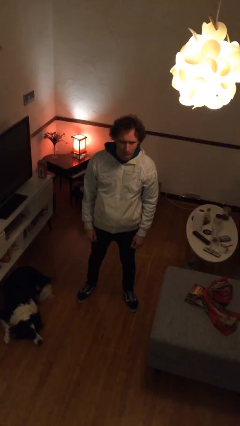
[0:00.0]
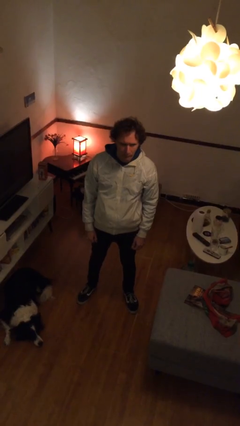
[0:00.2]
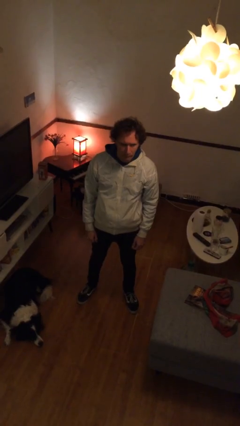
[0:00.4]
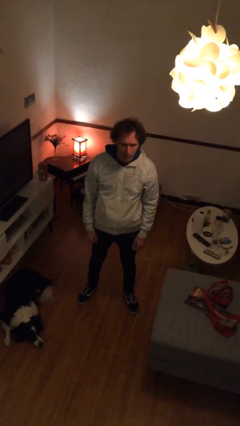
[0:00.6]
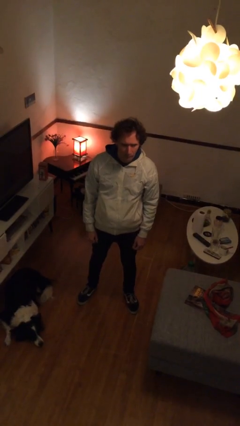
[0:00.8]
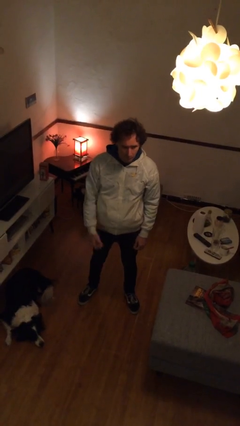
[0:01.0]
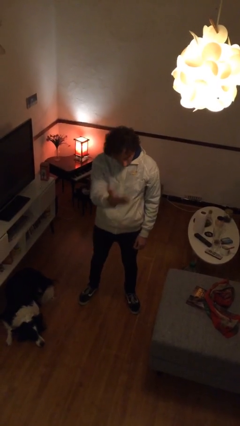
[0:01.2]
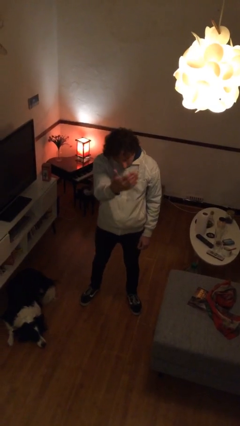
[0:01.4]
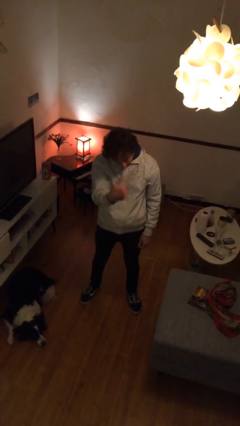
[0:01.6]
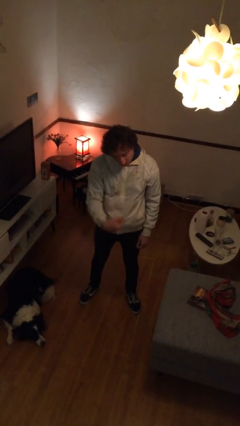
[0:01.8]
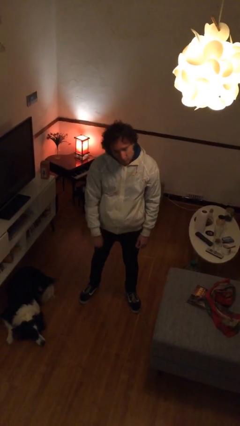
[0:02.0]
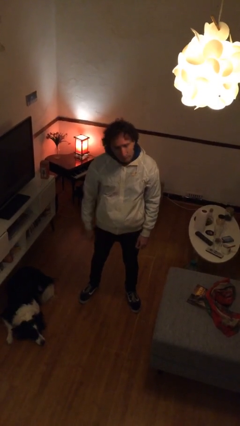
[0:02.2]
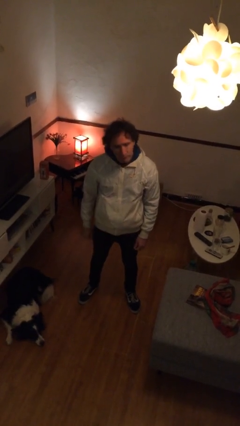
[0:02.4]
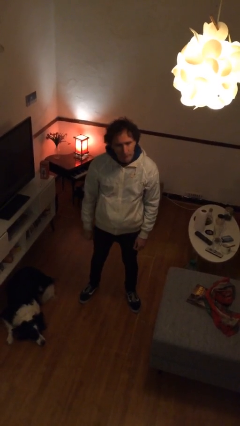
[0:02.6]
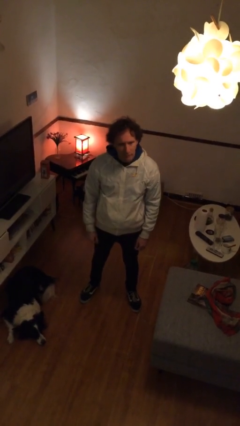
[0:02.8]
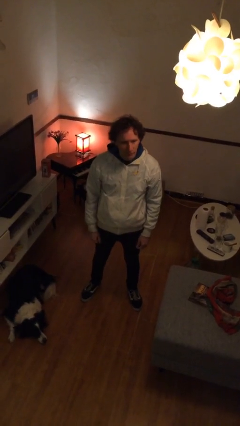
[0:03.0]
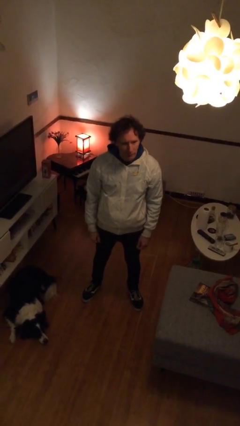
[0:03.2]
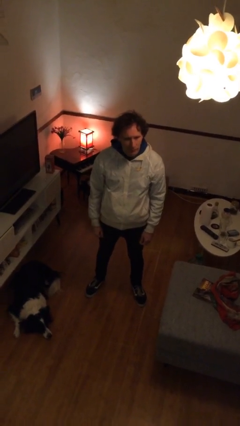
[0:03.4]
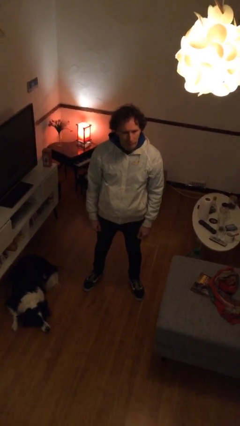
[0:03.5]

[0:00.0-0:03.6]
person gestures come here

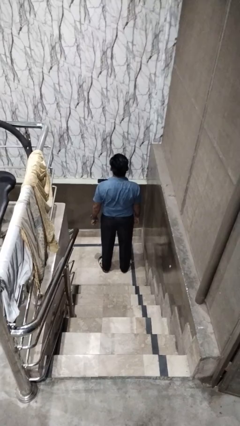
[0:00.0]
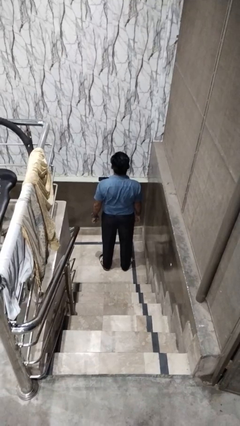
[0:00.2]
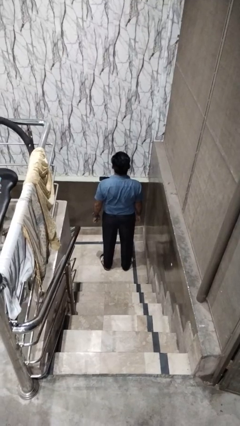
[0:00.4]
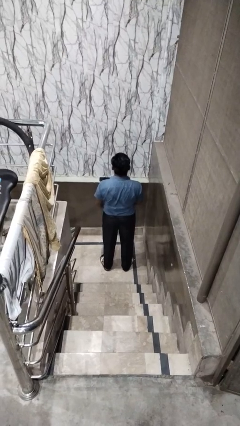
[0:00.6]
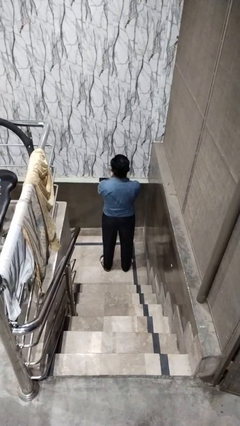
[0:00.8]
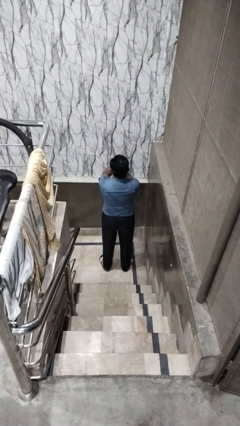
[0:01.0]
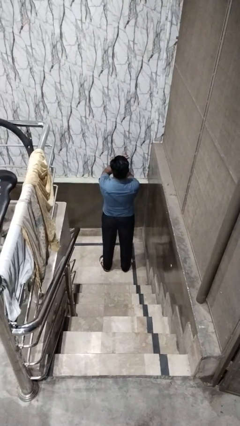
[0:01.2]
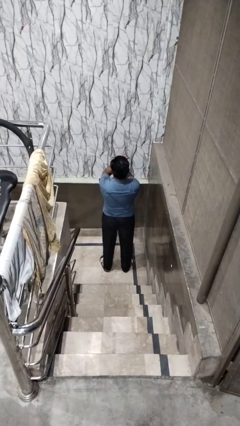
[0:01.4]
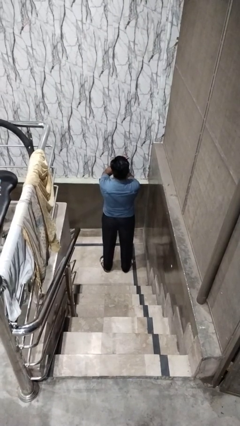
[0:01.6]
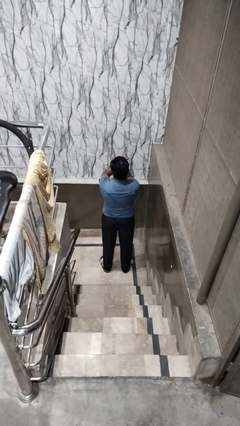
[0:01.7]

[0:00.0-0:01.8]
person gestures arms x

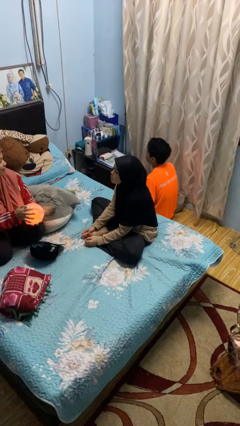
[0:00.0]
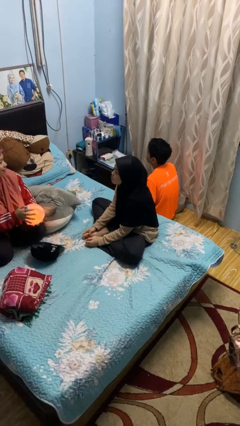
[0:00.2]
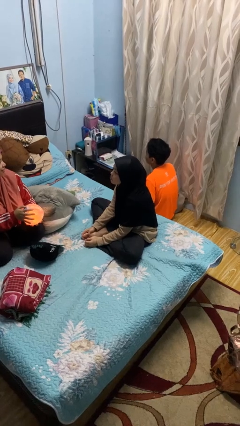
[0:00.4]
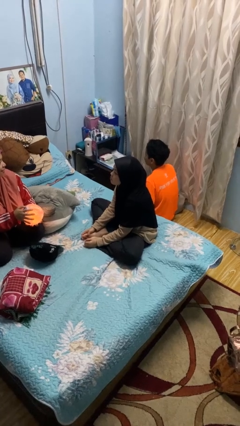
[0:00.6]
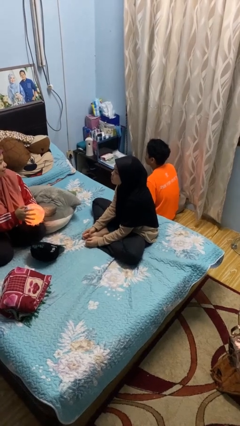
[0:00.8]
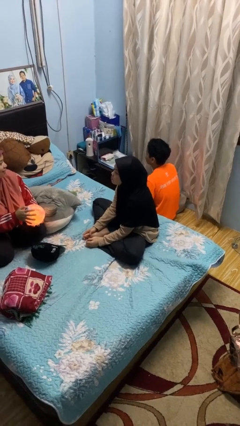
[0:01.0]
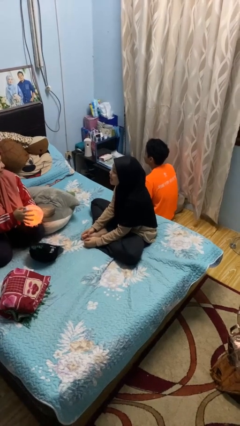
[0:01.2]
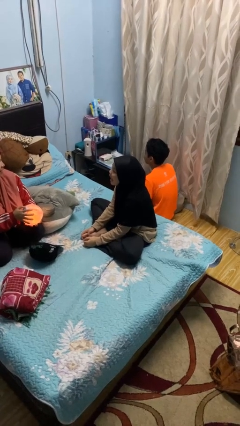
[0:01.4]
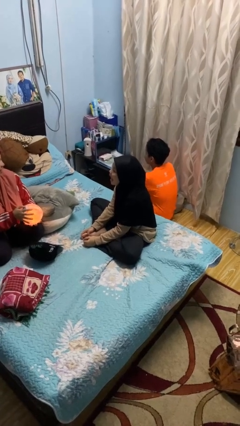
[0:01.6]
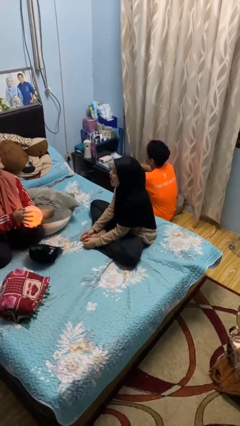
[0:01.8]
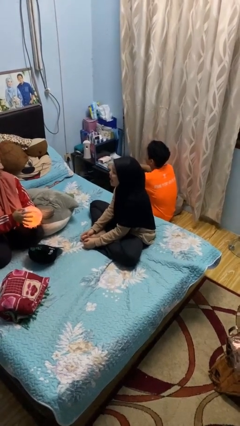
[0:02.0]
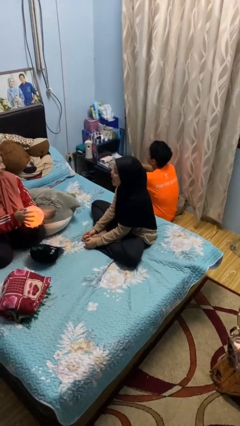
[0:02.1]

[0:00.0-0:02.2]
person laughs with person

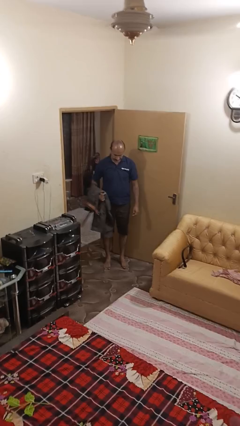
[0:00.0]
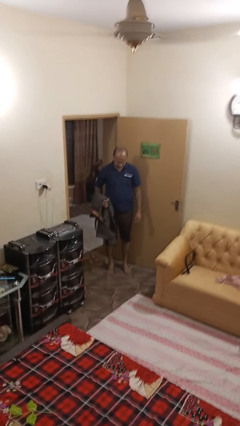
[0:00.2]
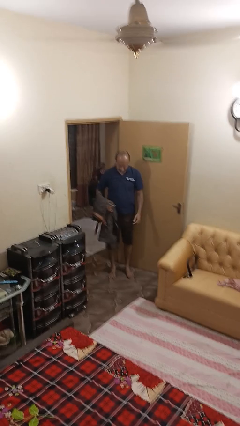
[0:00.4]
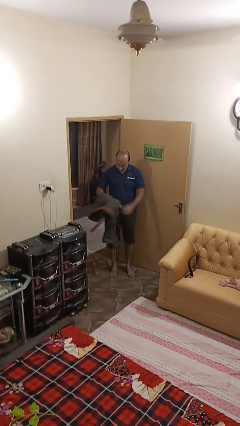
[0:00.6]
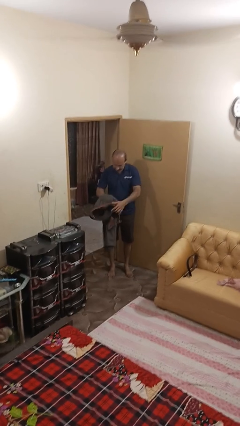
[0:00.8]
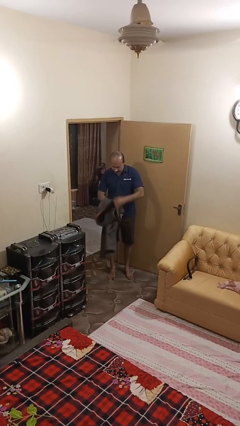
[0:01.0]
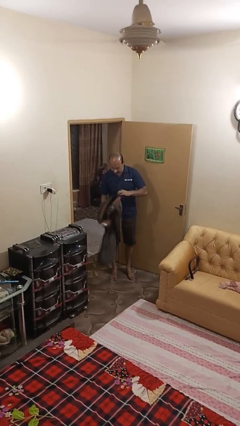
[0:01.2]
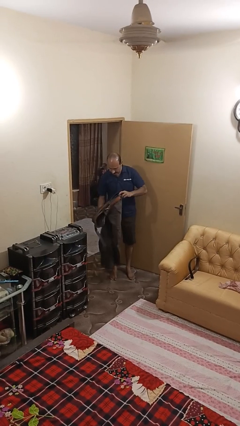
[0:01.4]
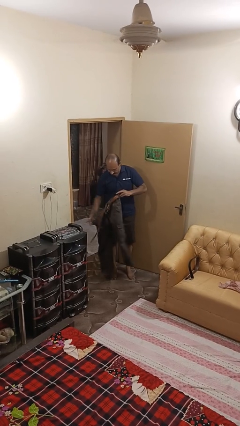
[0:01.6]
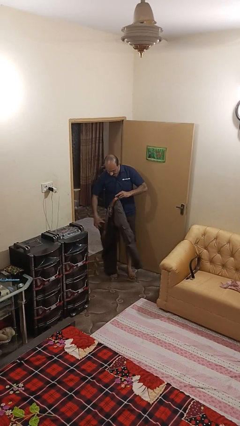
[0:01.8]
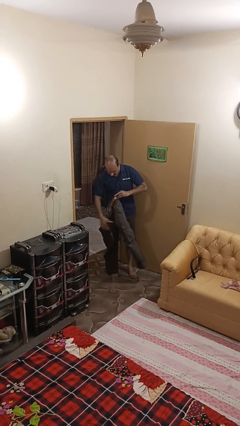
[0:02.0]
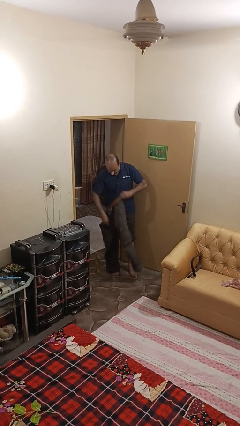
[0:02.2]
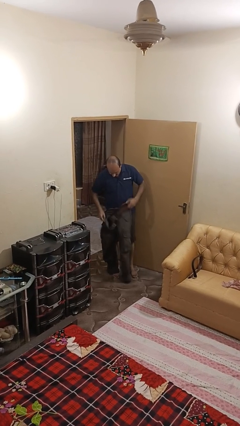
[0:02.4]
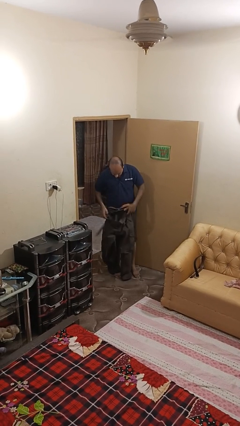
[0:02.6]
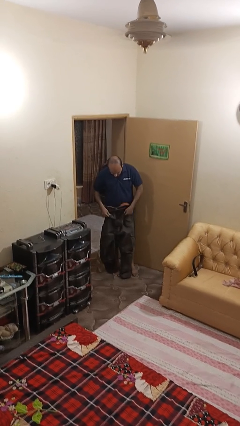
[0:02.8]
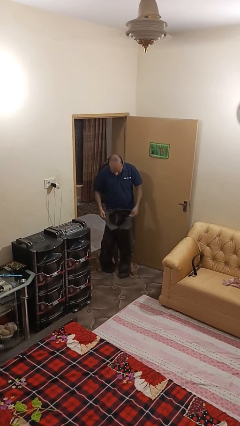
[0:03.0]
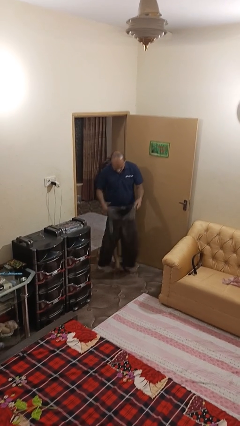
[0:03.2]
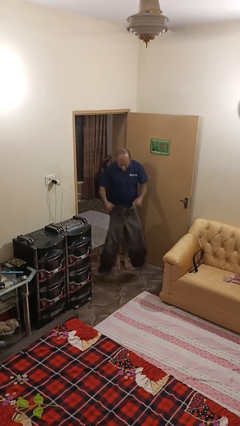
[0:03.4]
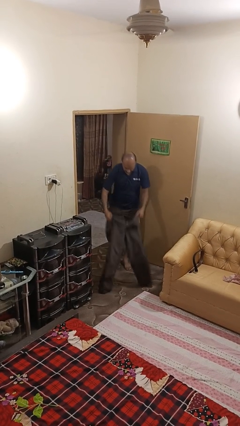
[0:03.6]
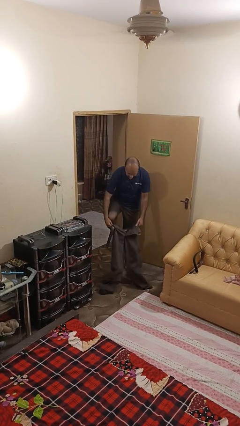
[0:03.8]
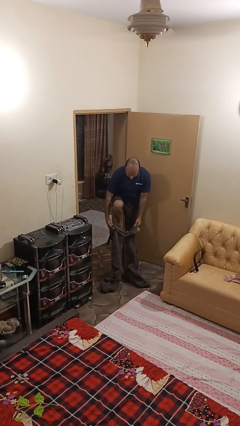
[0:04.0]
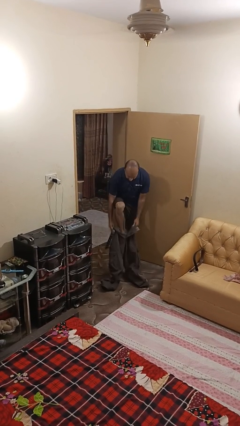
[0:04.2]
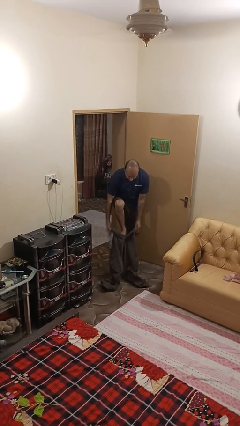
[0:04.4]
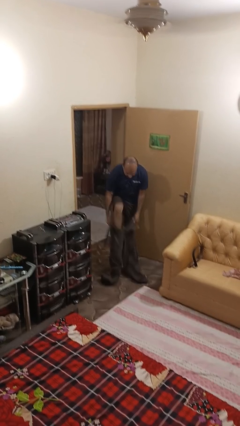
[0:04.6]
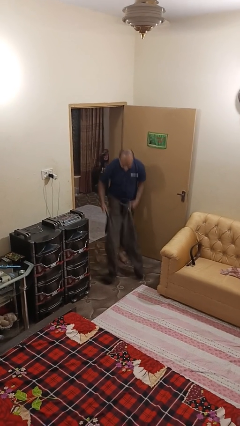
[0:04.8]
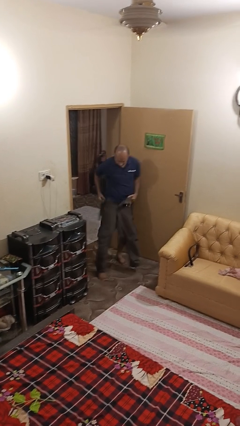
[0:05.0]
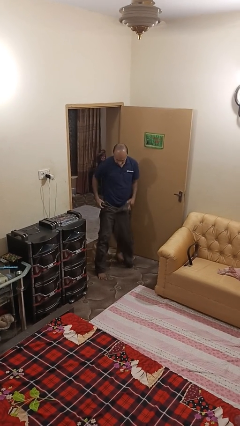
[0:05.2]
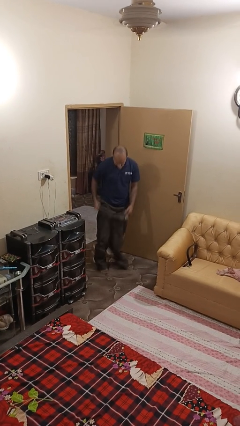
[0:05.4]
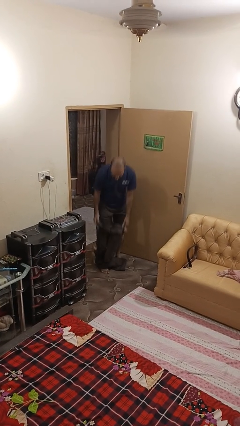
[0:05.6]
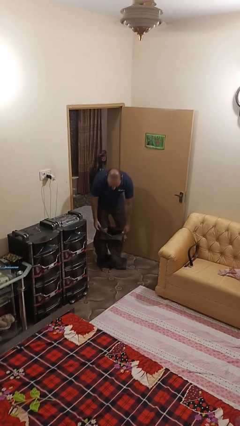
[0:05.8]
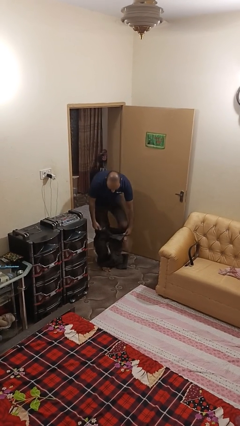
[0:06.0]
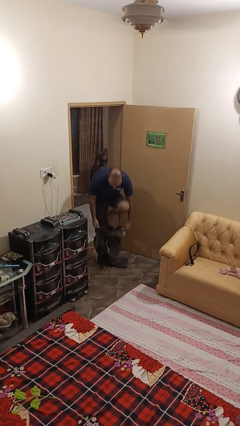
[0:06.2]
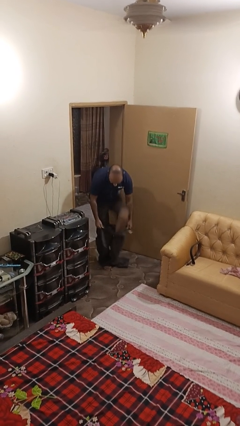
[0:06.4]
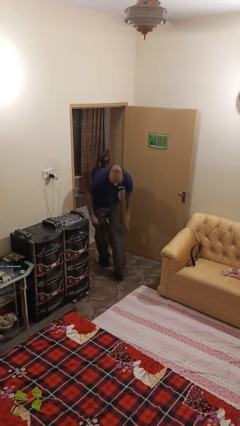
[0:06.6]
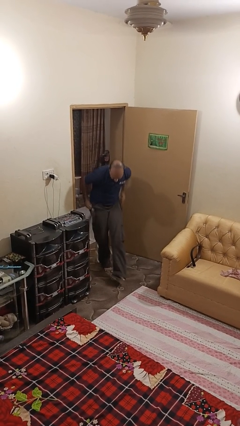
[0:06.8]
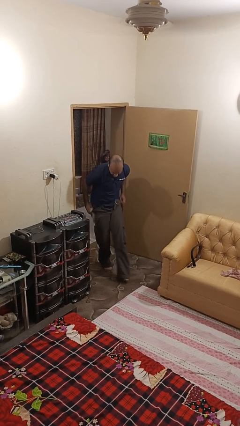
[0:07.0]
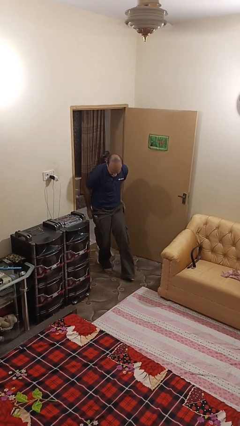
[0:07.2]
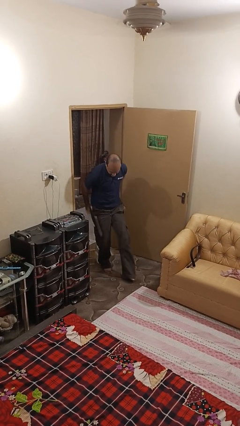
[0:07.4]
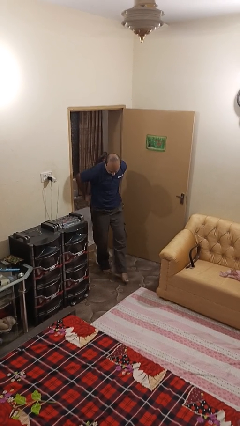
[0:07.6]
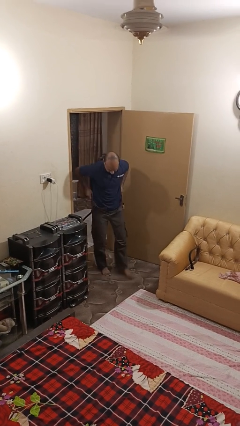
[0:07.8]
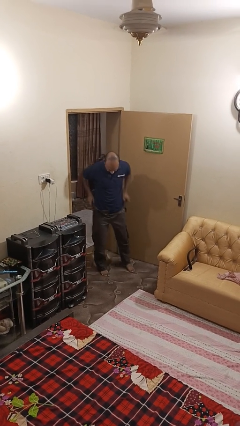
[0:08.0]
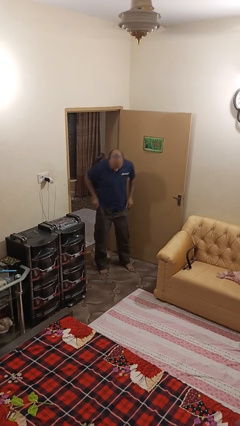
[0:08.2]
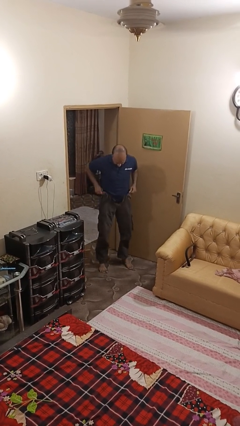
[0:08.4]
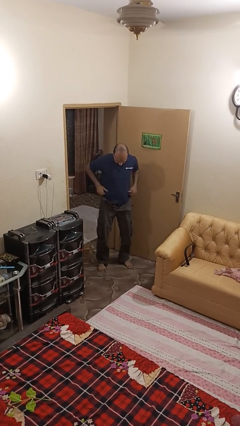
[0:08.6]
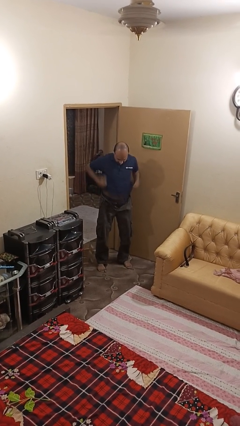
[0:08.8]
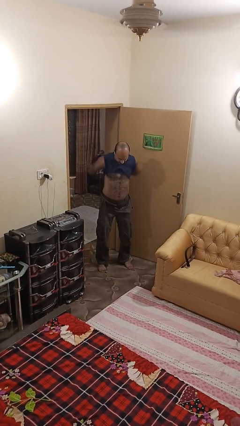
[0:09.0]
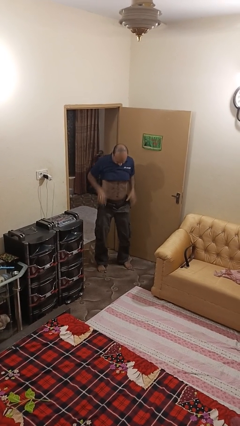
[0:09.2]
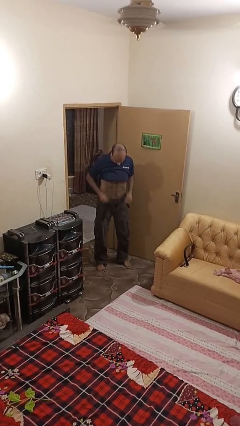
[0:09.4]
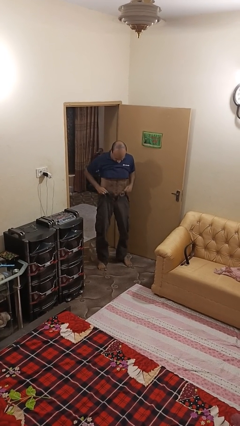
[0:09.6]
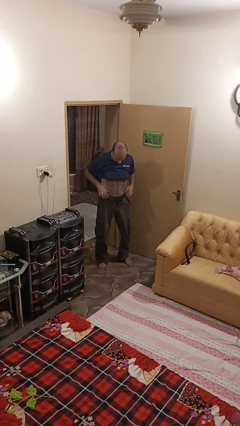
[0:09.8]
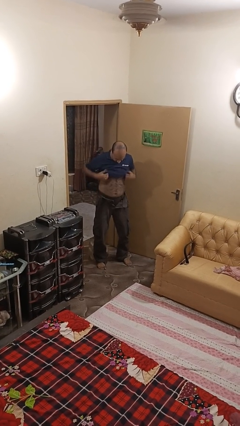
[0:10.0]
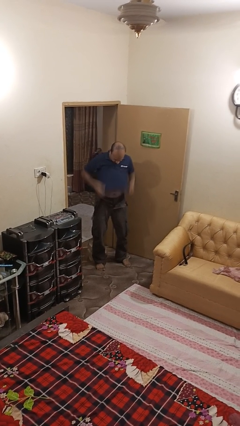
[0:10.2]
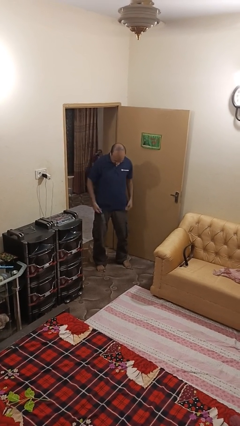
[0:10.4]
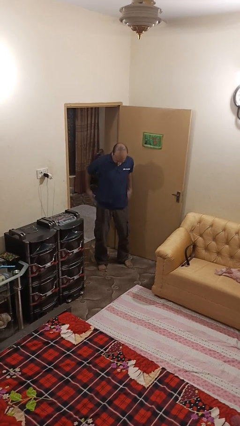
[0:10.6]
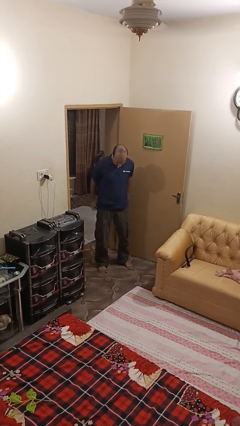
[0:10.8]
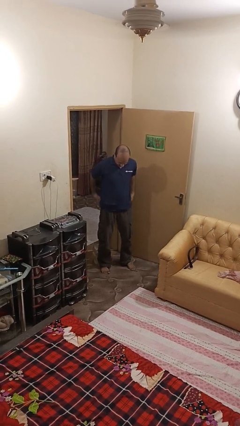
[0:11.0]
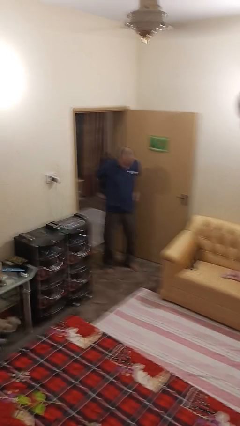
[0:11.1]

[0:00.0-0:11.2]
person puts on pants
